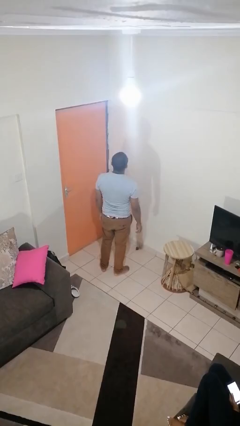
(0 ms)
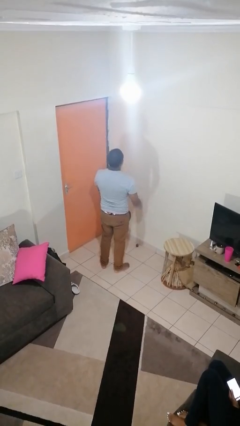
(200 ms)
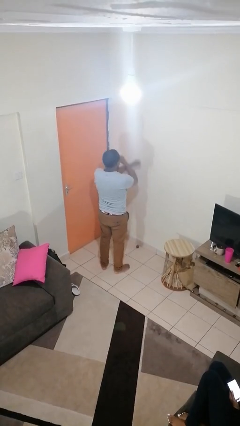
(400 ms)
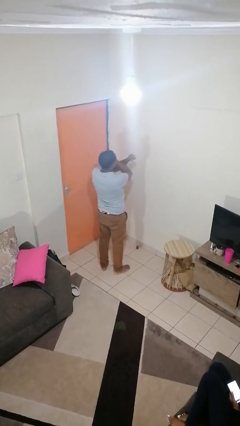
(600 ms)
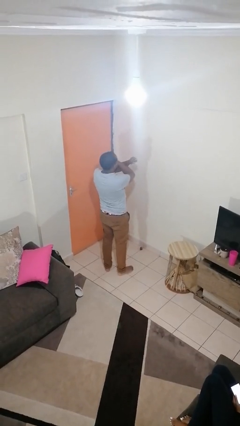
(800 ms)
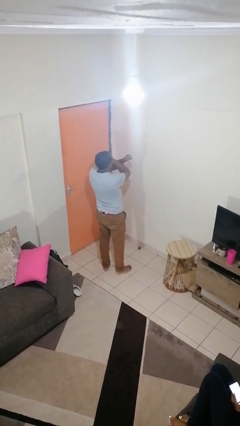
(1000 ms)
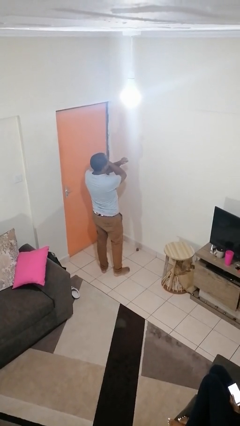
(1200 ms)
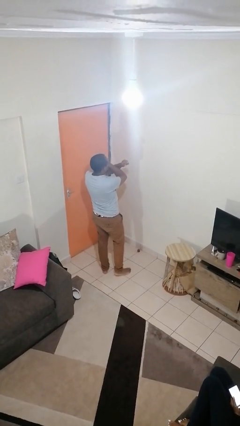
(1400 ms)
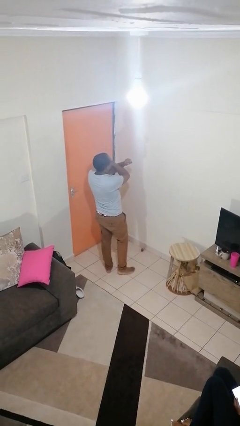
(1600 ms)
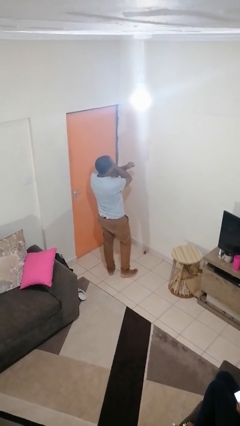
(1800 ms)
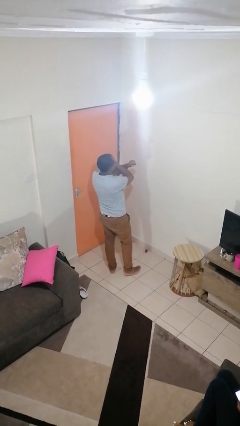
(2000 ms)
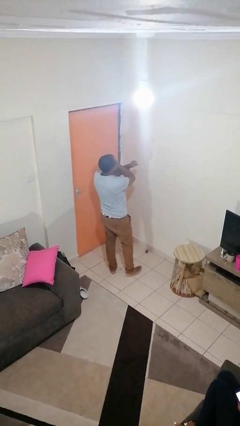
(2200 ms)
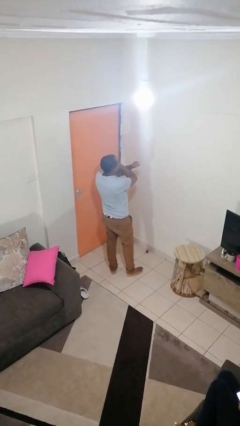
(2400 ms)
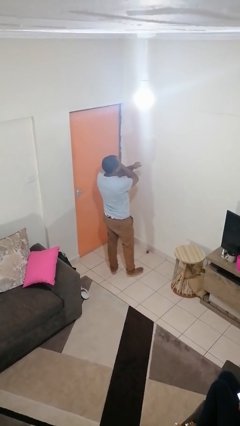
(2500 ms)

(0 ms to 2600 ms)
person gestures arms x

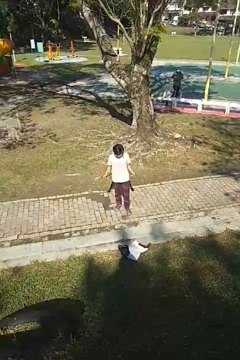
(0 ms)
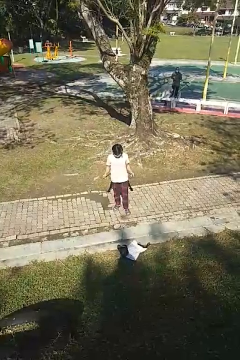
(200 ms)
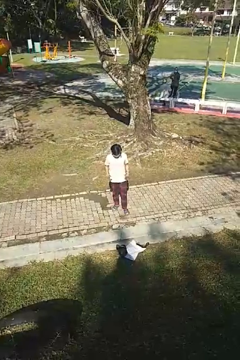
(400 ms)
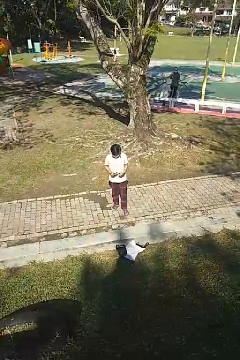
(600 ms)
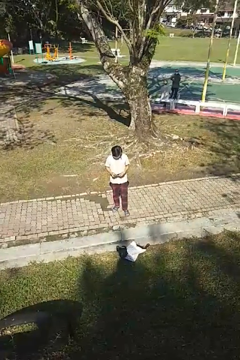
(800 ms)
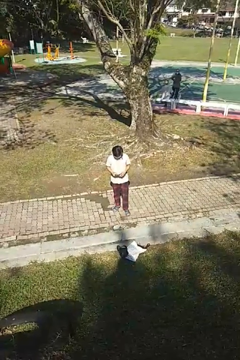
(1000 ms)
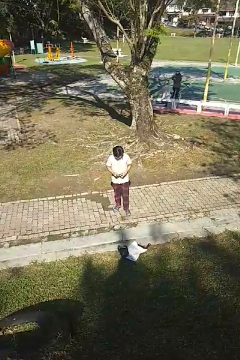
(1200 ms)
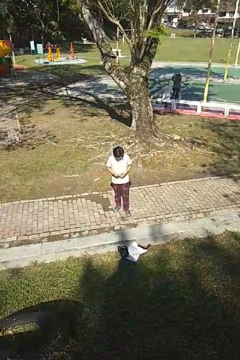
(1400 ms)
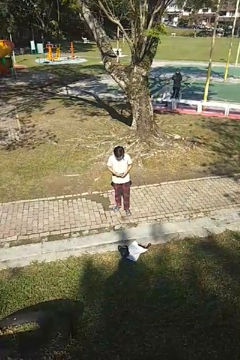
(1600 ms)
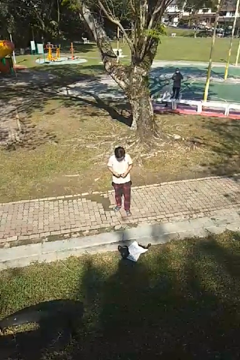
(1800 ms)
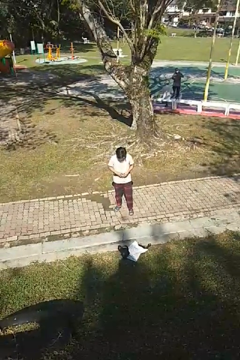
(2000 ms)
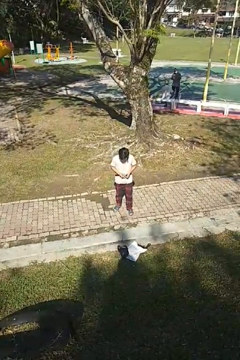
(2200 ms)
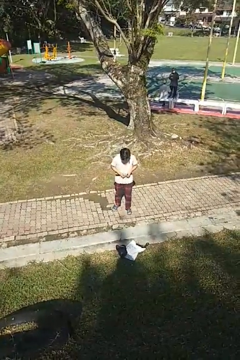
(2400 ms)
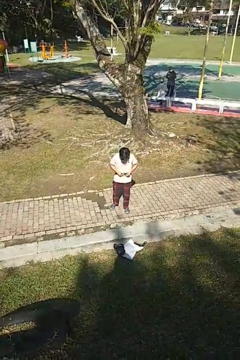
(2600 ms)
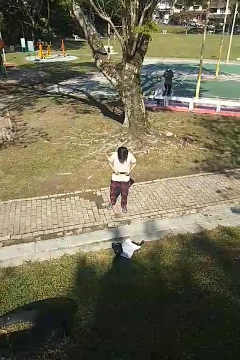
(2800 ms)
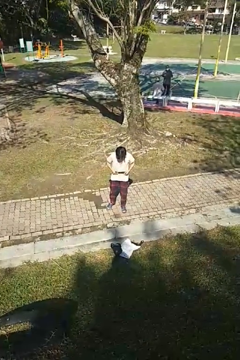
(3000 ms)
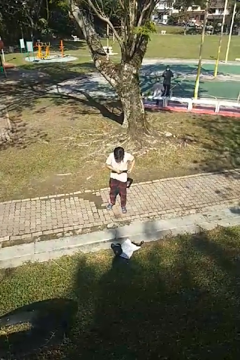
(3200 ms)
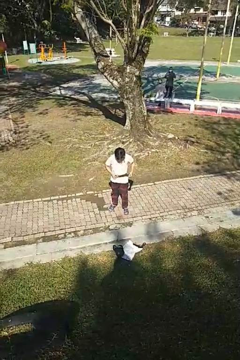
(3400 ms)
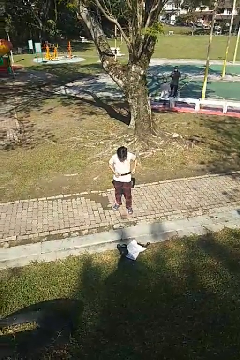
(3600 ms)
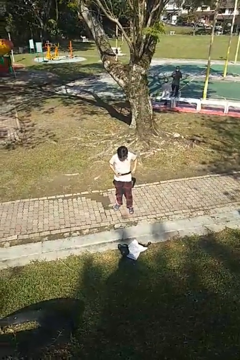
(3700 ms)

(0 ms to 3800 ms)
person puts on belt

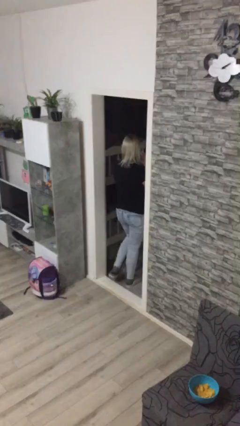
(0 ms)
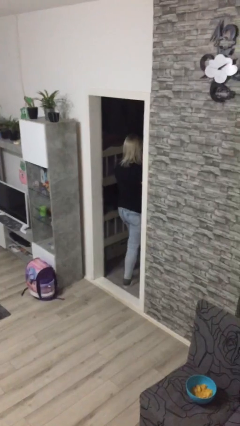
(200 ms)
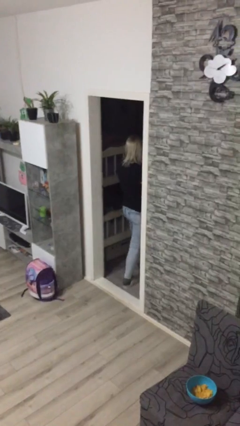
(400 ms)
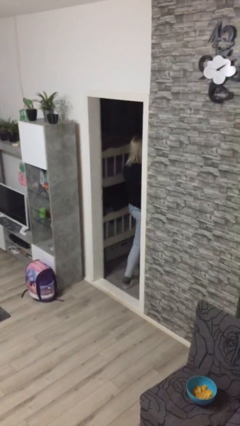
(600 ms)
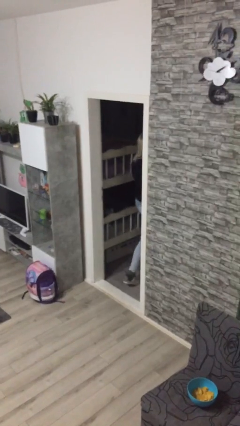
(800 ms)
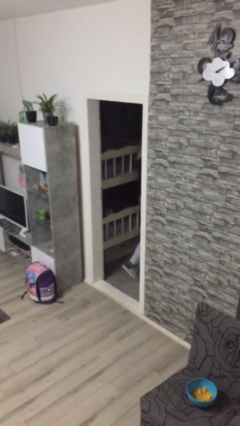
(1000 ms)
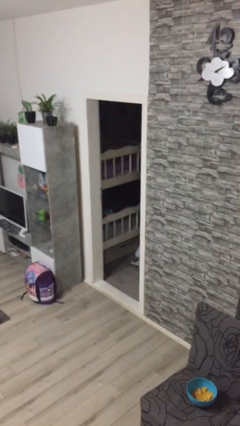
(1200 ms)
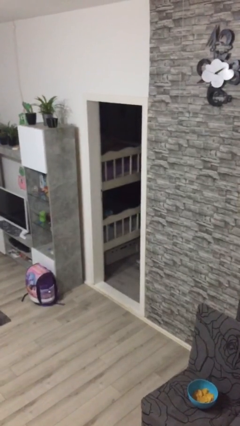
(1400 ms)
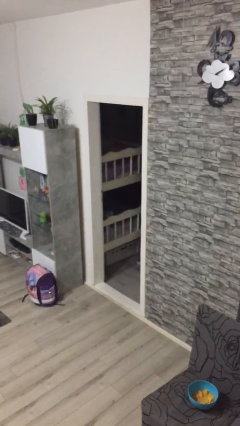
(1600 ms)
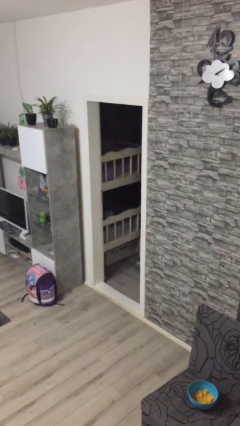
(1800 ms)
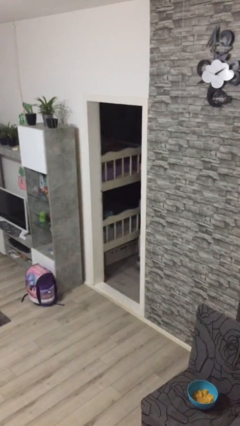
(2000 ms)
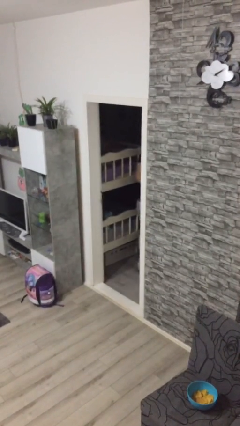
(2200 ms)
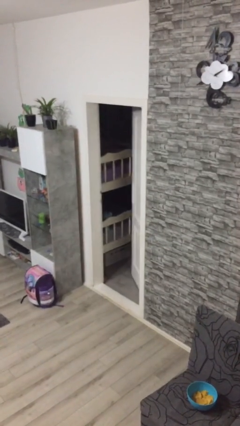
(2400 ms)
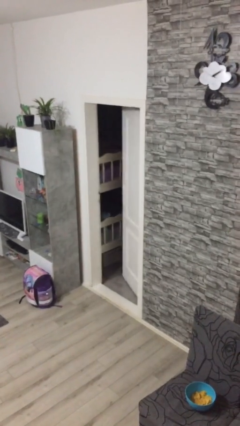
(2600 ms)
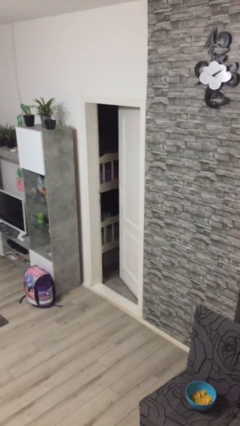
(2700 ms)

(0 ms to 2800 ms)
person exits scene through structure

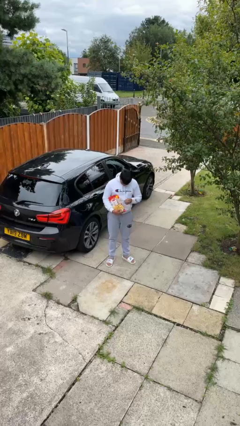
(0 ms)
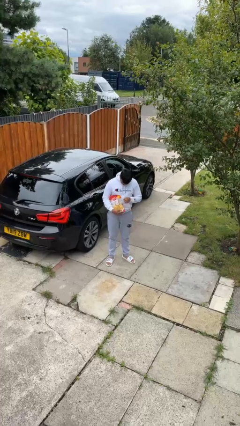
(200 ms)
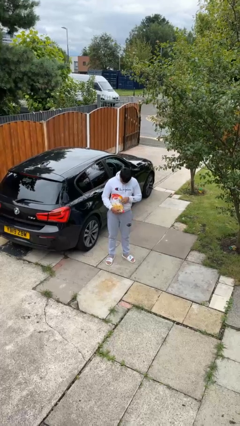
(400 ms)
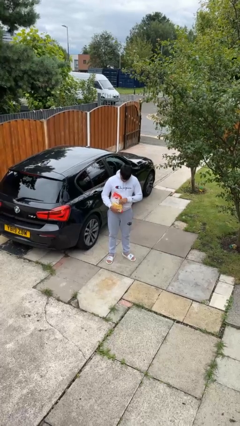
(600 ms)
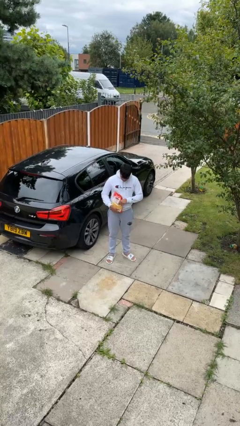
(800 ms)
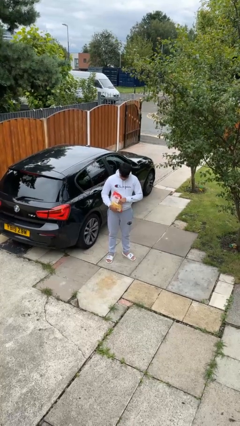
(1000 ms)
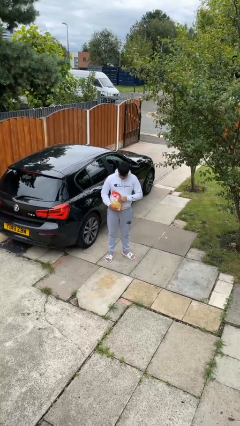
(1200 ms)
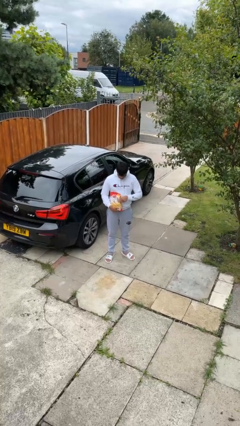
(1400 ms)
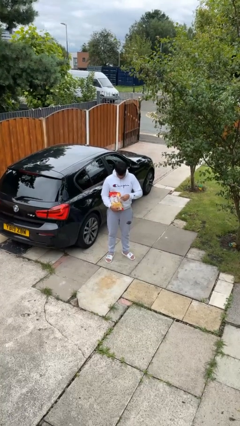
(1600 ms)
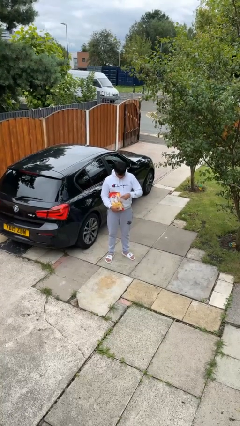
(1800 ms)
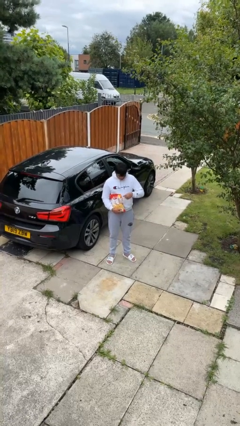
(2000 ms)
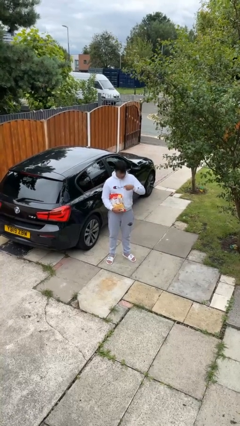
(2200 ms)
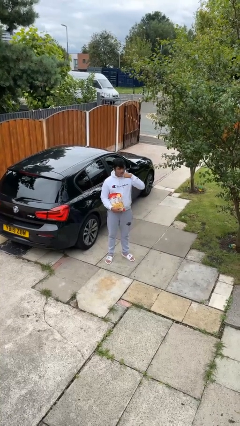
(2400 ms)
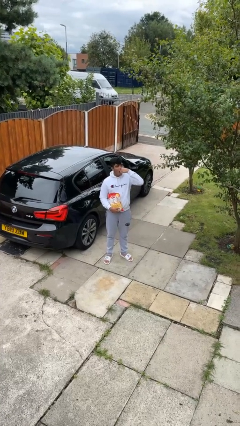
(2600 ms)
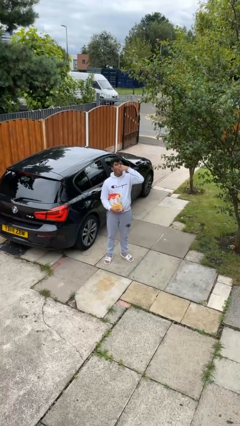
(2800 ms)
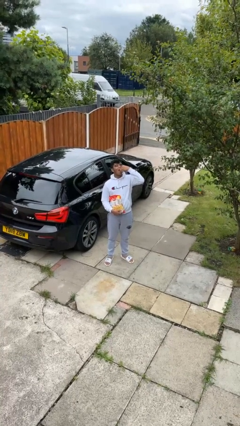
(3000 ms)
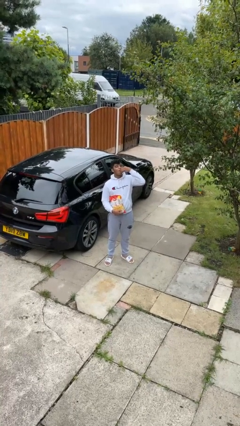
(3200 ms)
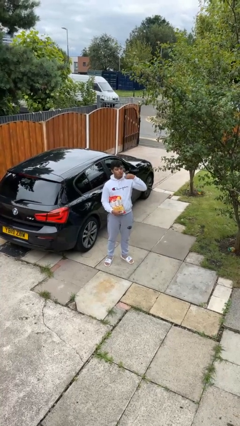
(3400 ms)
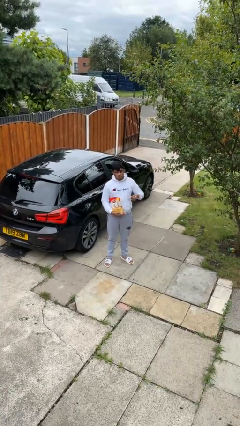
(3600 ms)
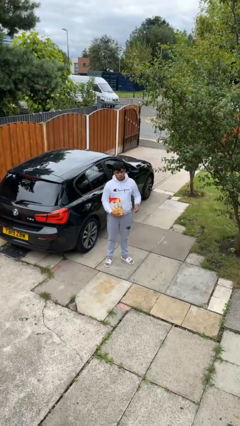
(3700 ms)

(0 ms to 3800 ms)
person eats snack from bag

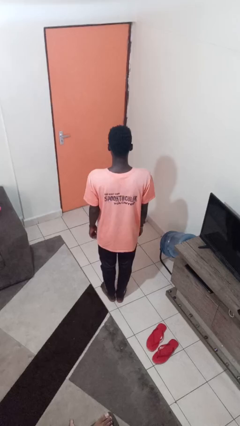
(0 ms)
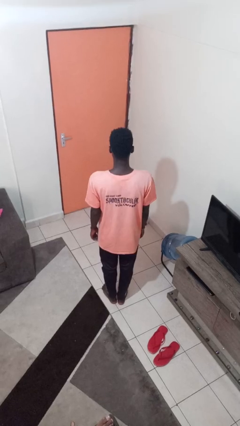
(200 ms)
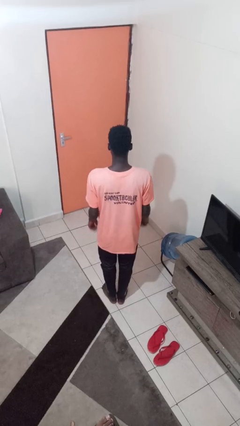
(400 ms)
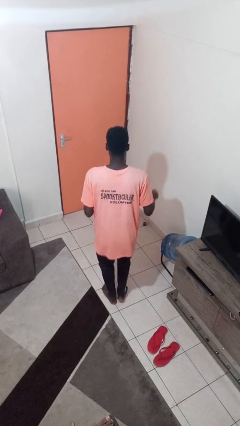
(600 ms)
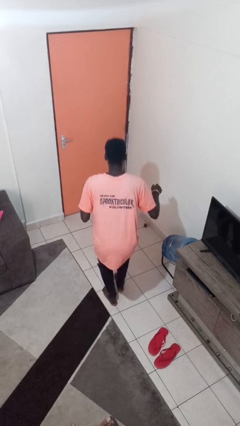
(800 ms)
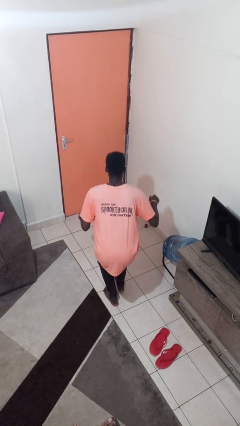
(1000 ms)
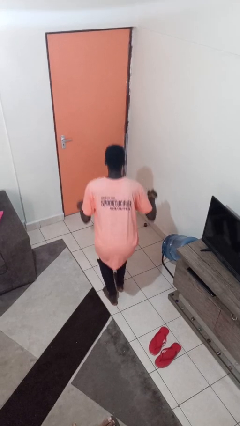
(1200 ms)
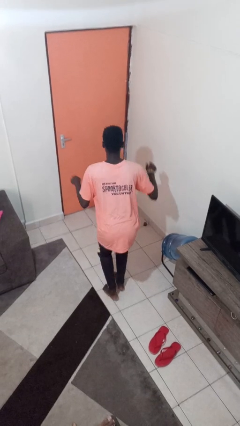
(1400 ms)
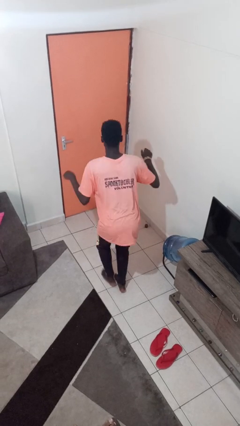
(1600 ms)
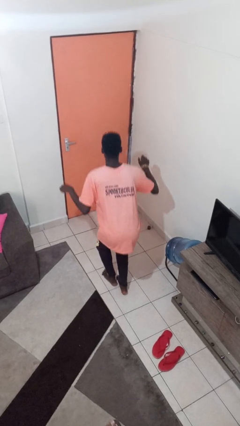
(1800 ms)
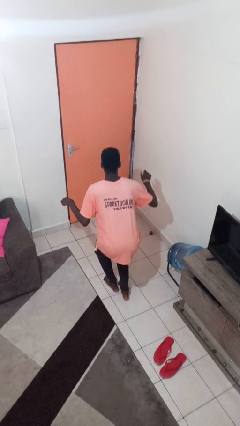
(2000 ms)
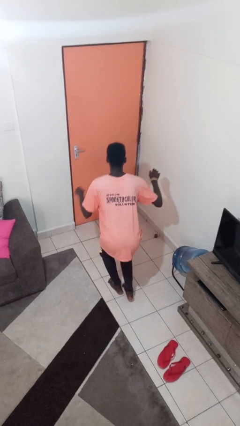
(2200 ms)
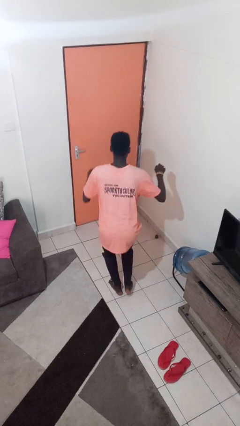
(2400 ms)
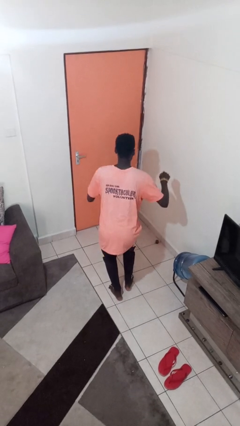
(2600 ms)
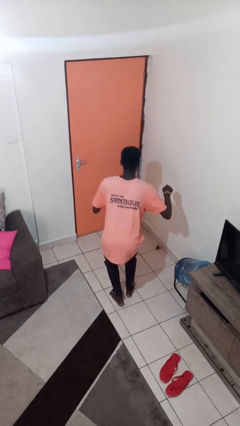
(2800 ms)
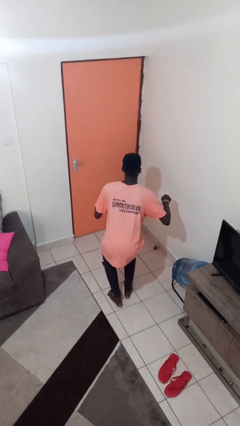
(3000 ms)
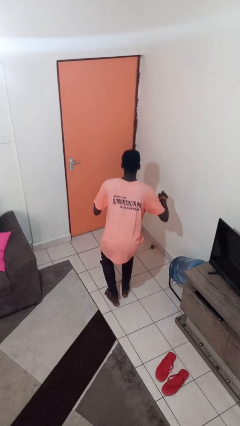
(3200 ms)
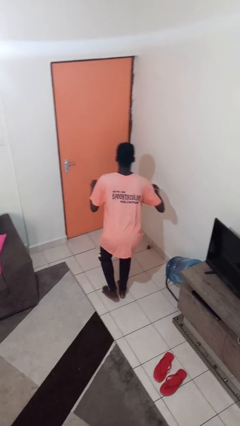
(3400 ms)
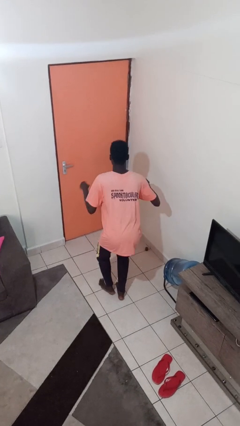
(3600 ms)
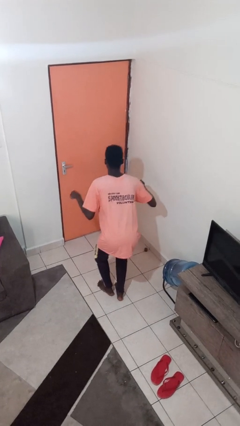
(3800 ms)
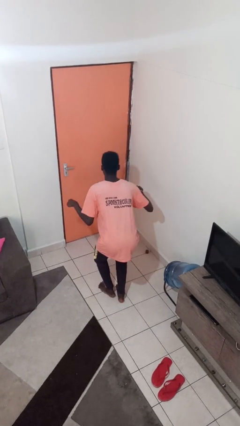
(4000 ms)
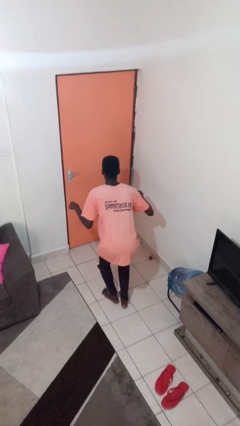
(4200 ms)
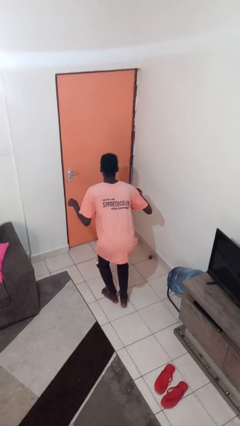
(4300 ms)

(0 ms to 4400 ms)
person walks tiptoe

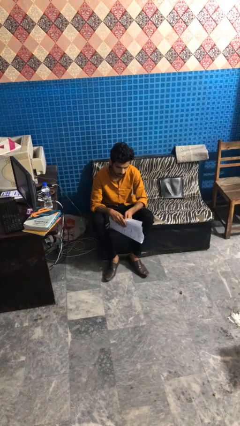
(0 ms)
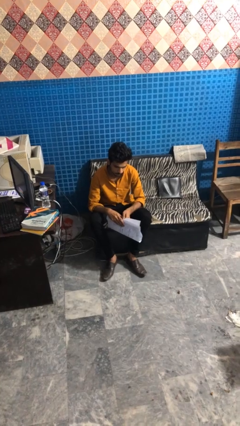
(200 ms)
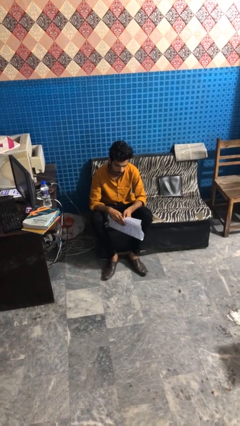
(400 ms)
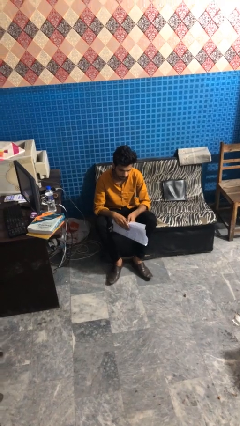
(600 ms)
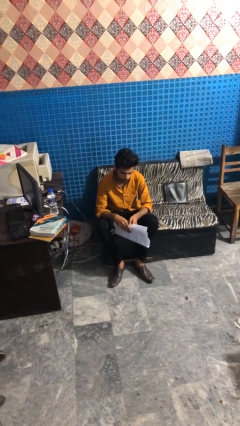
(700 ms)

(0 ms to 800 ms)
person reads newspaper
